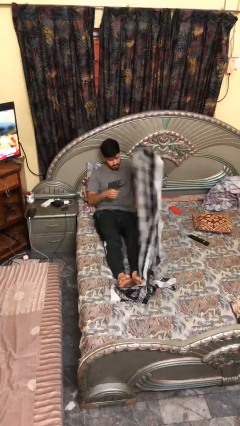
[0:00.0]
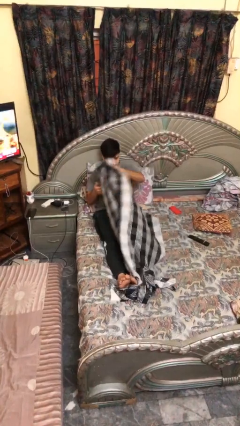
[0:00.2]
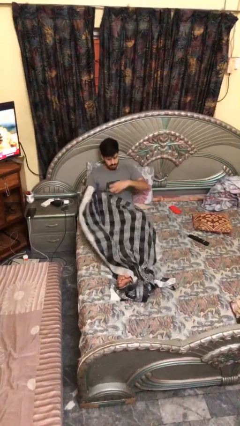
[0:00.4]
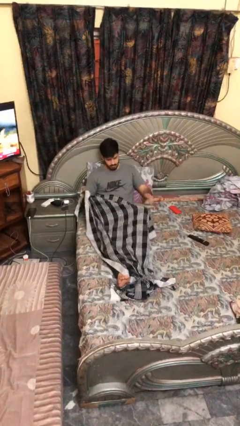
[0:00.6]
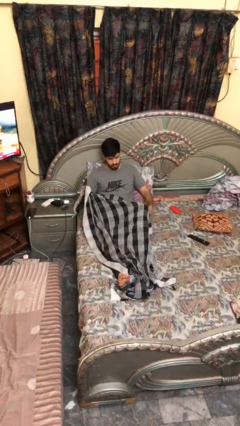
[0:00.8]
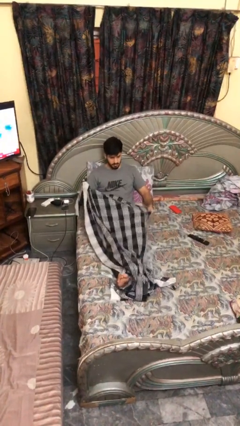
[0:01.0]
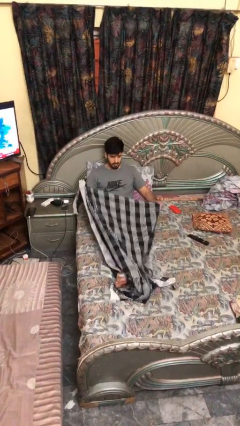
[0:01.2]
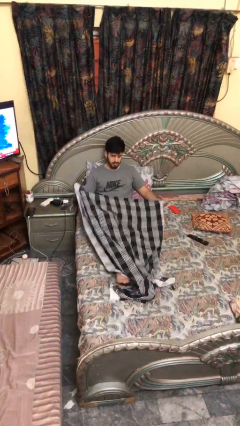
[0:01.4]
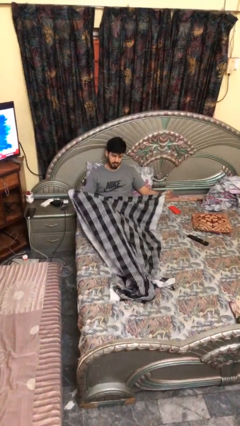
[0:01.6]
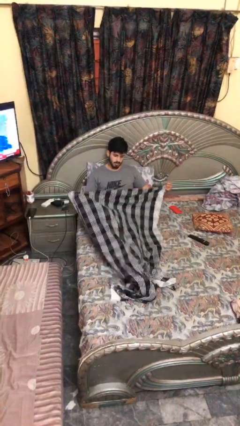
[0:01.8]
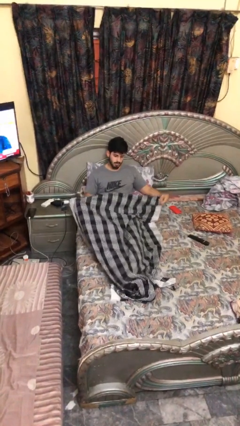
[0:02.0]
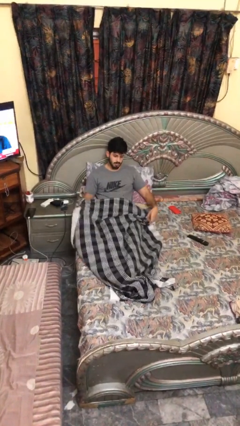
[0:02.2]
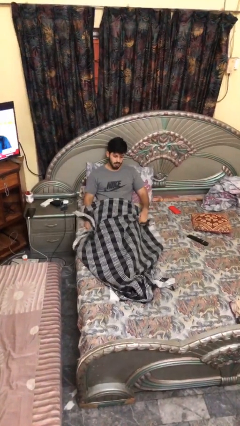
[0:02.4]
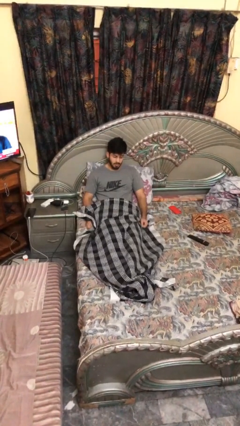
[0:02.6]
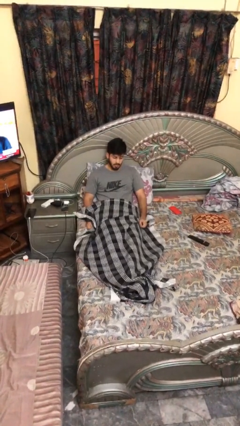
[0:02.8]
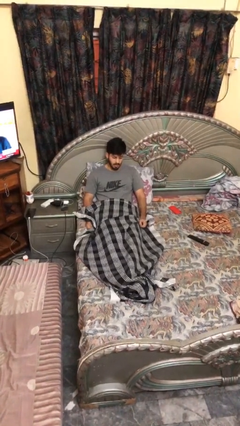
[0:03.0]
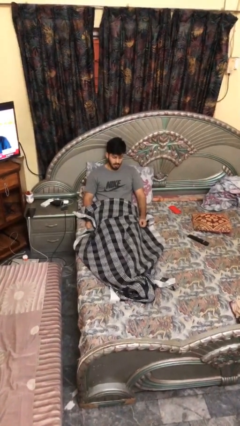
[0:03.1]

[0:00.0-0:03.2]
person covers with bedsheets

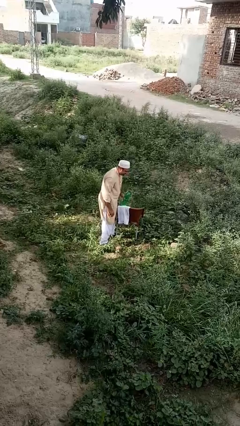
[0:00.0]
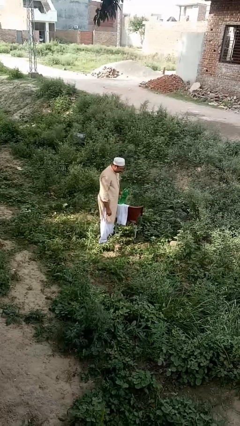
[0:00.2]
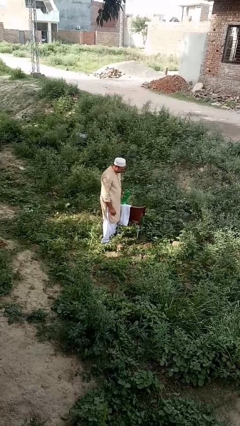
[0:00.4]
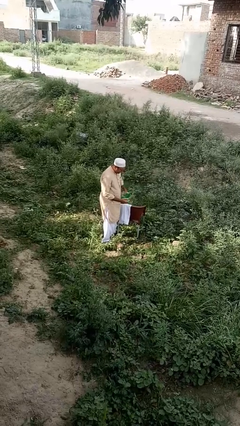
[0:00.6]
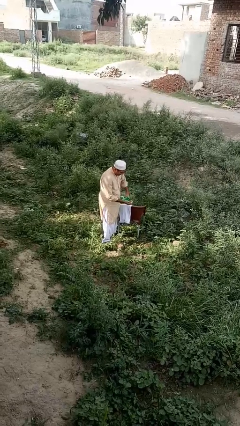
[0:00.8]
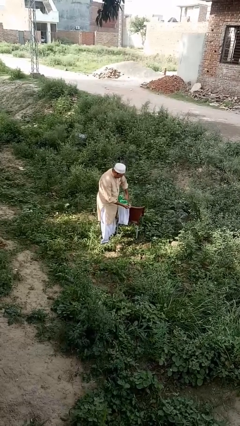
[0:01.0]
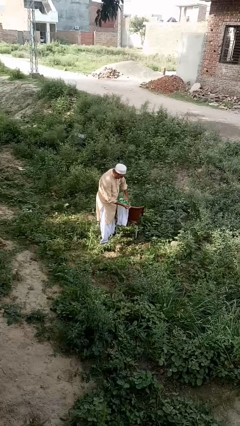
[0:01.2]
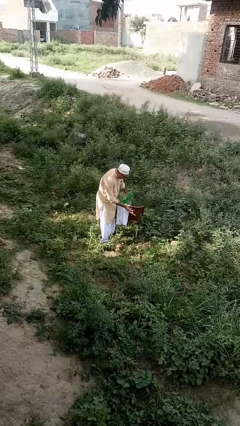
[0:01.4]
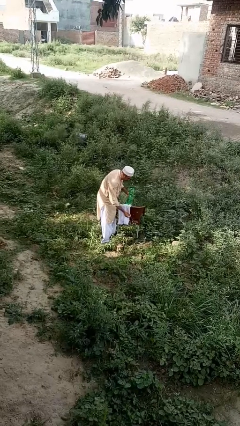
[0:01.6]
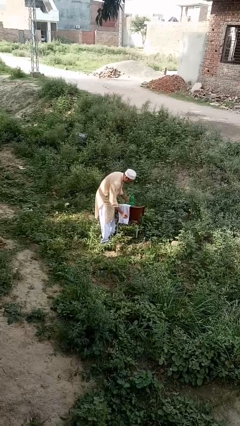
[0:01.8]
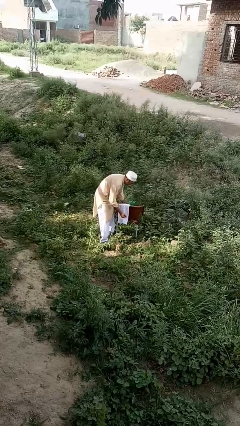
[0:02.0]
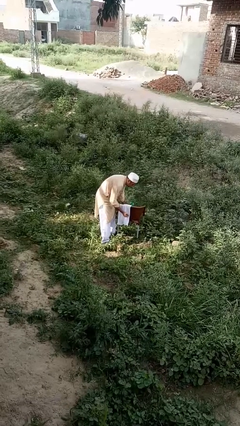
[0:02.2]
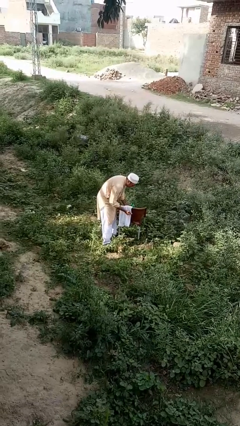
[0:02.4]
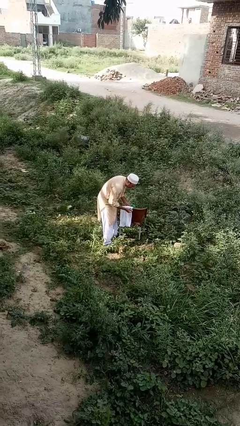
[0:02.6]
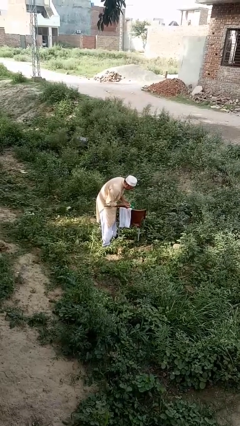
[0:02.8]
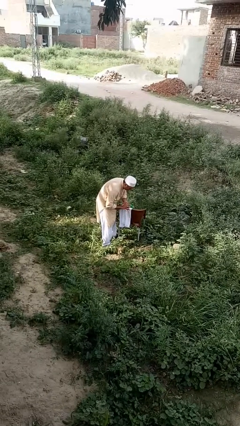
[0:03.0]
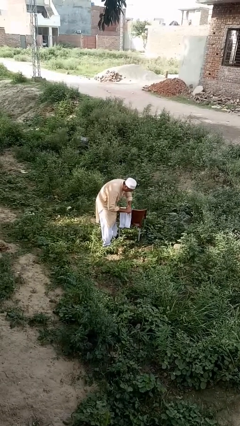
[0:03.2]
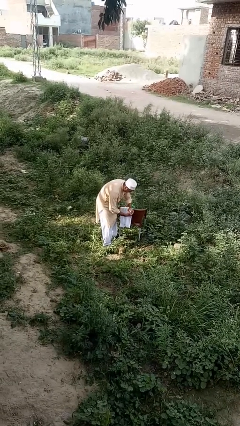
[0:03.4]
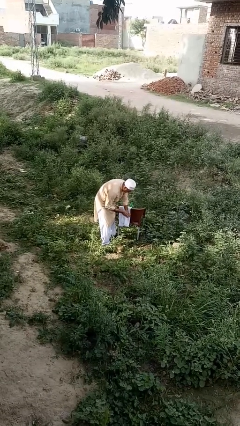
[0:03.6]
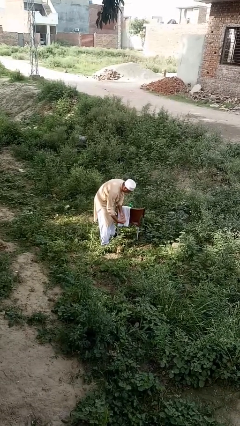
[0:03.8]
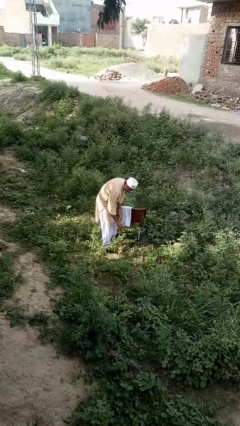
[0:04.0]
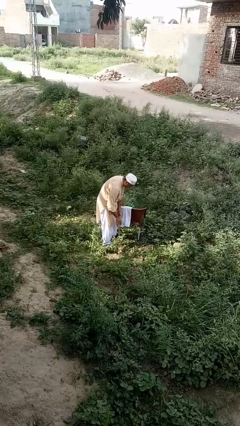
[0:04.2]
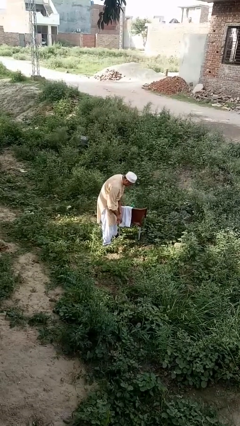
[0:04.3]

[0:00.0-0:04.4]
person washes hands

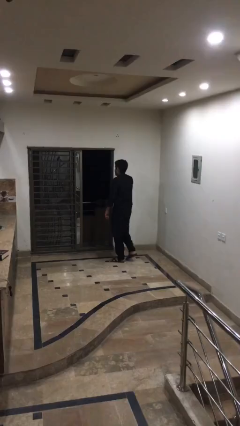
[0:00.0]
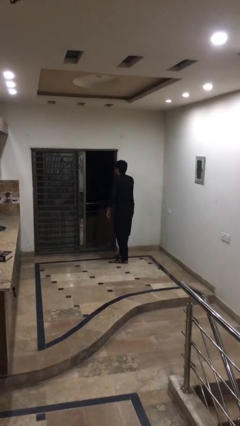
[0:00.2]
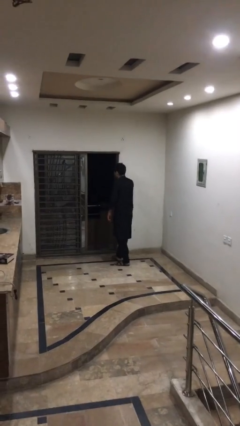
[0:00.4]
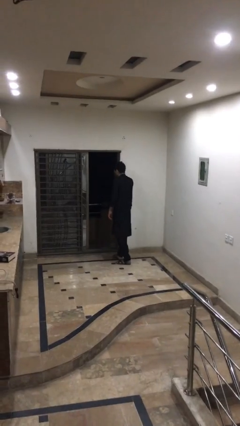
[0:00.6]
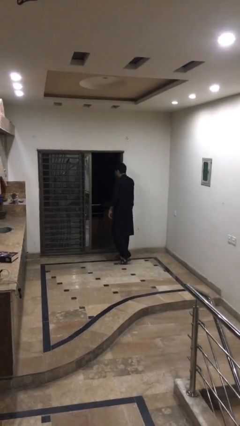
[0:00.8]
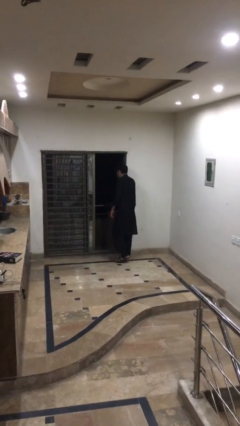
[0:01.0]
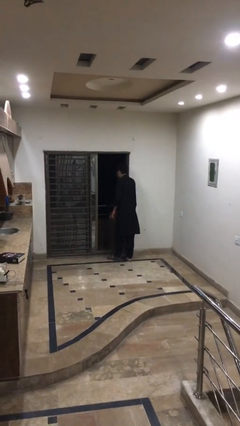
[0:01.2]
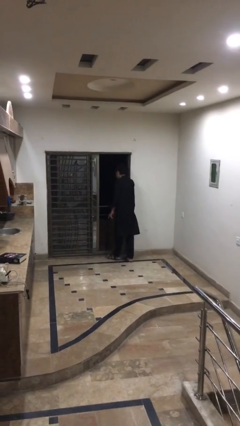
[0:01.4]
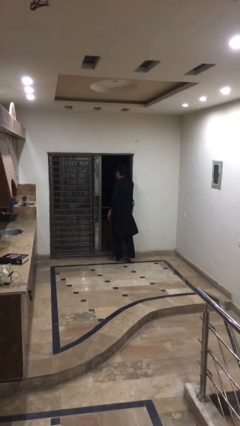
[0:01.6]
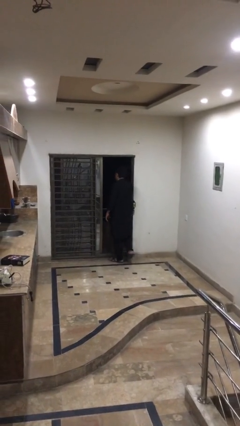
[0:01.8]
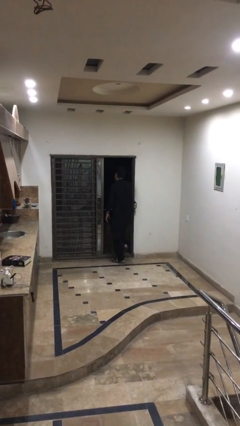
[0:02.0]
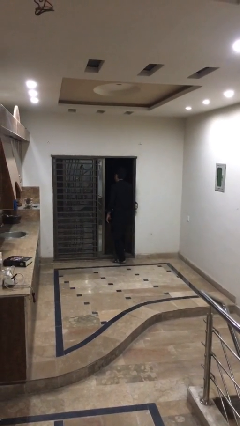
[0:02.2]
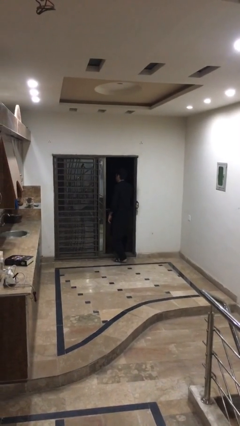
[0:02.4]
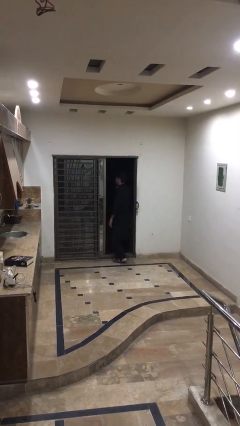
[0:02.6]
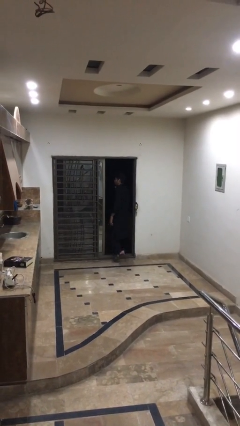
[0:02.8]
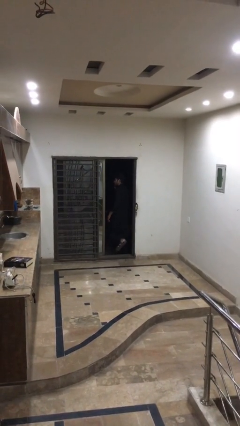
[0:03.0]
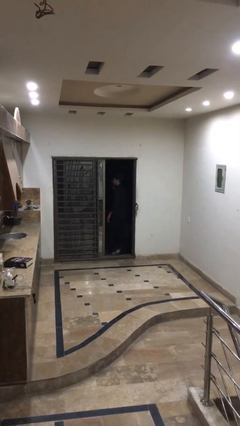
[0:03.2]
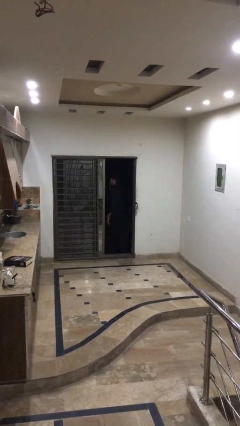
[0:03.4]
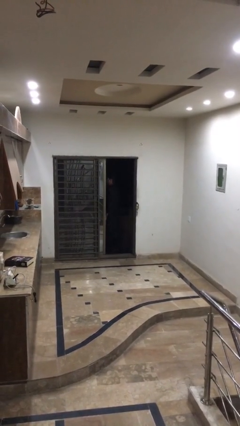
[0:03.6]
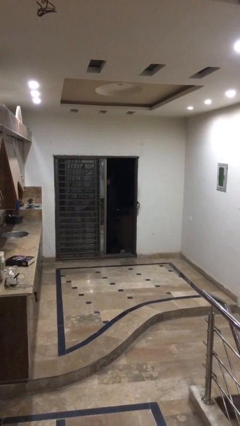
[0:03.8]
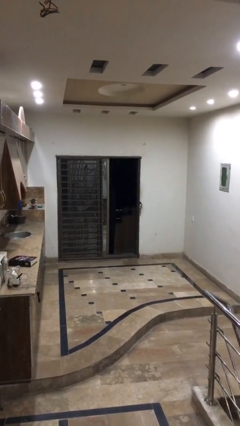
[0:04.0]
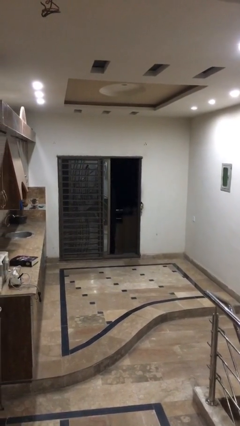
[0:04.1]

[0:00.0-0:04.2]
person exits scene through structure

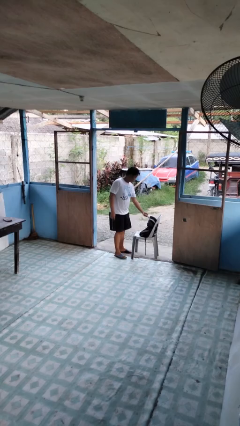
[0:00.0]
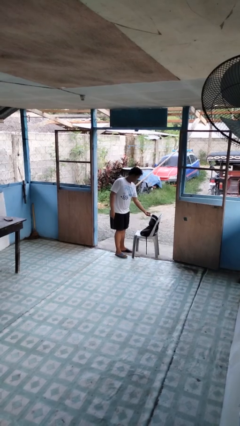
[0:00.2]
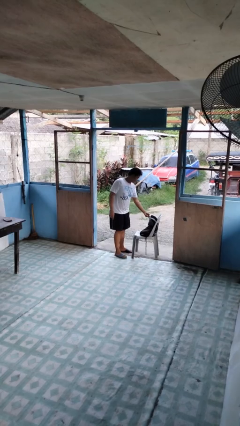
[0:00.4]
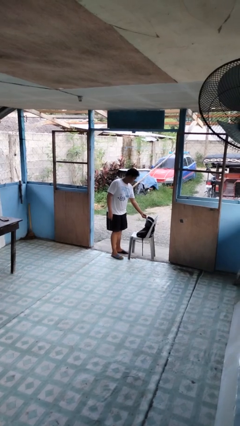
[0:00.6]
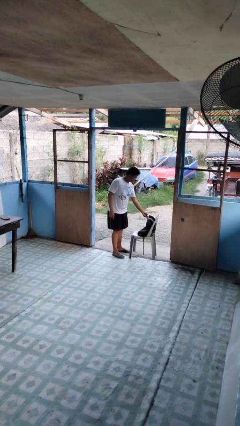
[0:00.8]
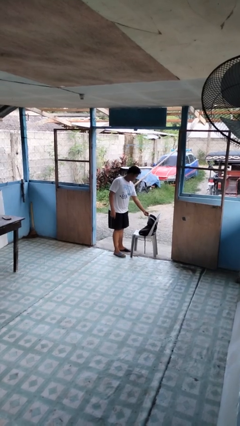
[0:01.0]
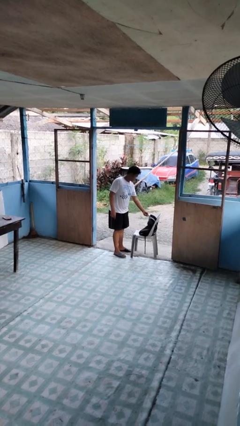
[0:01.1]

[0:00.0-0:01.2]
person taps object with finger

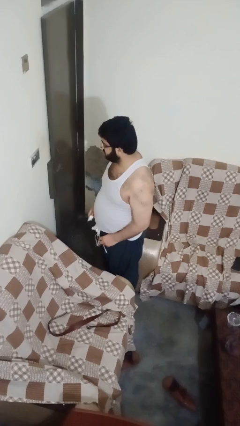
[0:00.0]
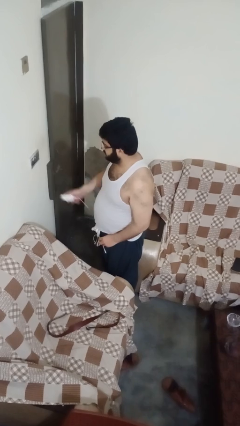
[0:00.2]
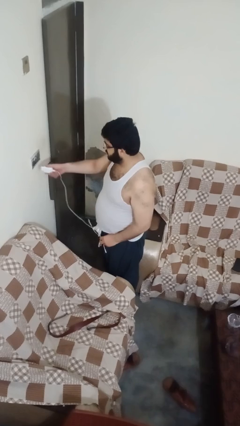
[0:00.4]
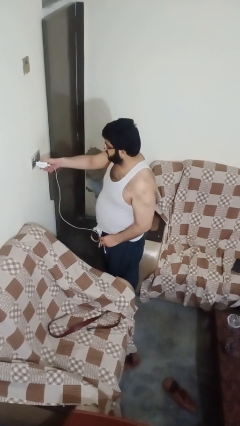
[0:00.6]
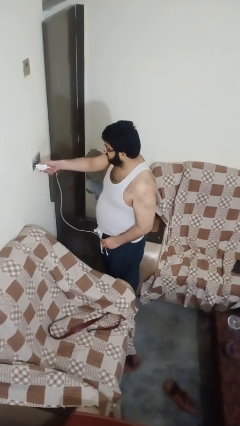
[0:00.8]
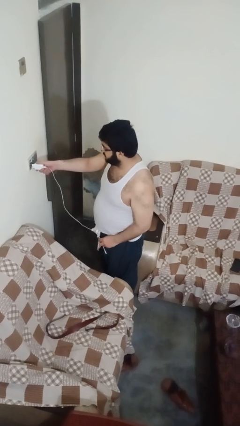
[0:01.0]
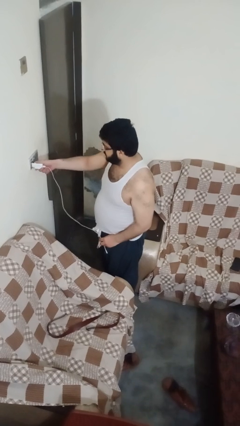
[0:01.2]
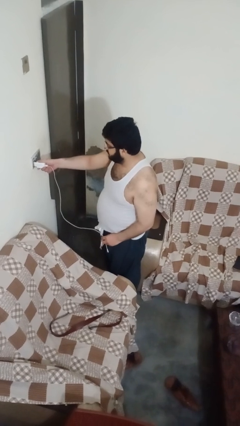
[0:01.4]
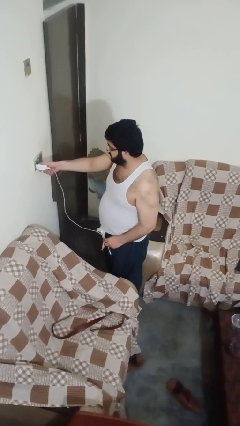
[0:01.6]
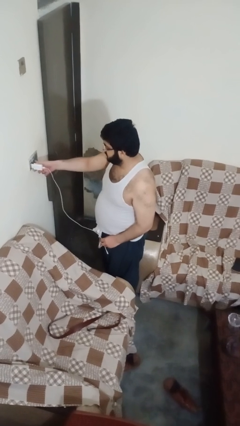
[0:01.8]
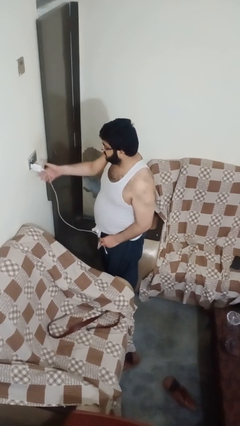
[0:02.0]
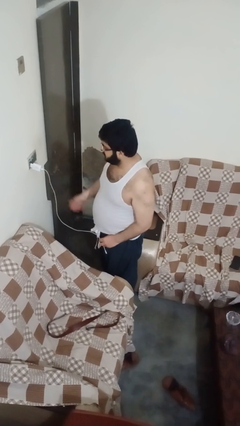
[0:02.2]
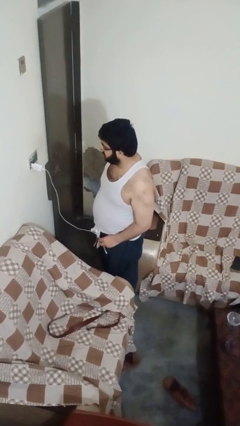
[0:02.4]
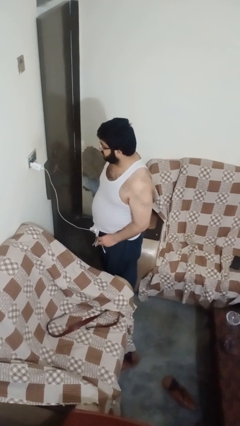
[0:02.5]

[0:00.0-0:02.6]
person plugs into electrical socket

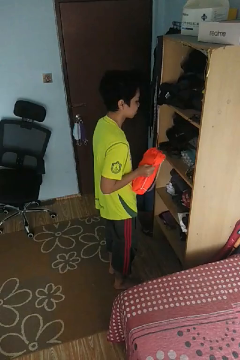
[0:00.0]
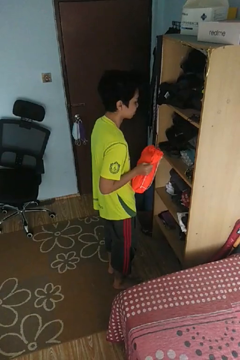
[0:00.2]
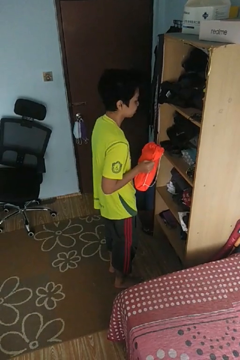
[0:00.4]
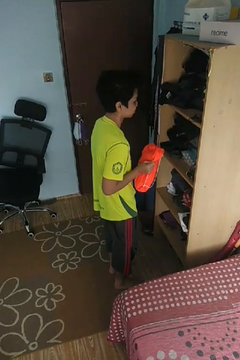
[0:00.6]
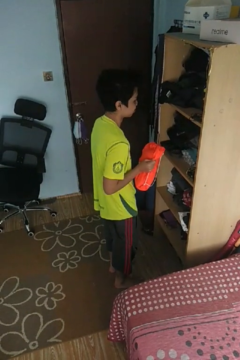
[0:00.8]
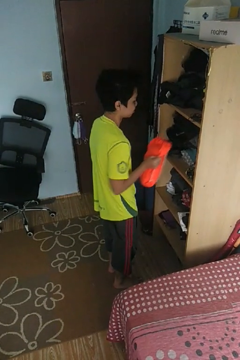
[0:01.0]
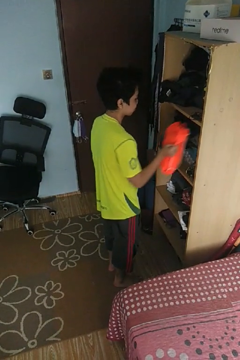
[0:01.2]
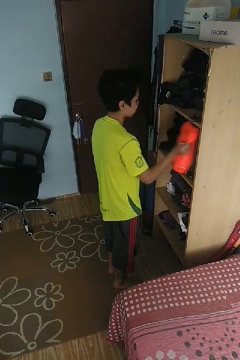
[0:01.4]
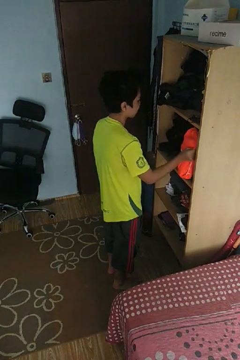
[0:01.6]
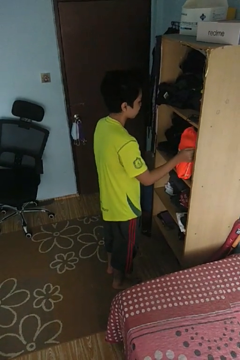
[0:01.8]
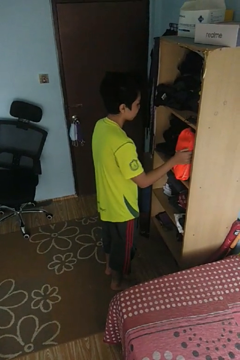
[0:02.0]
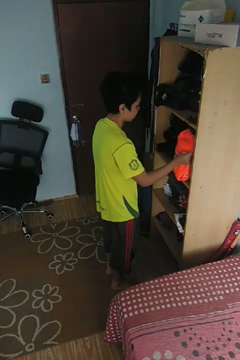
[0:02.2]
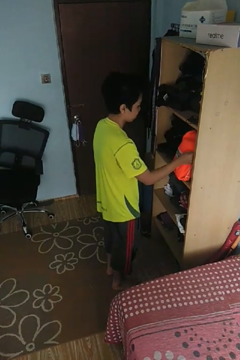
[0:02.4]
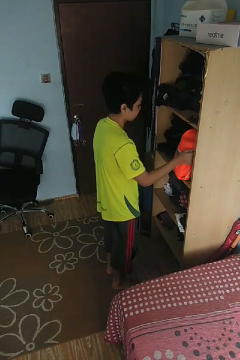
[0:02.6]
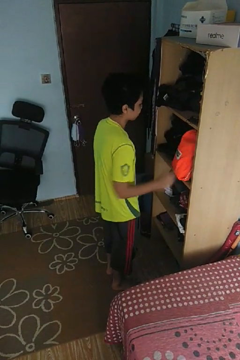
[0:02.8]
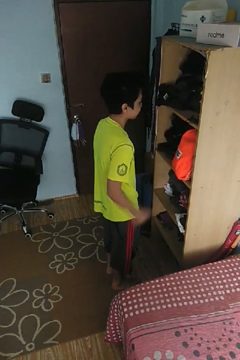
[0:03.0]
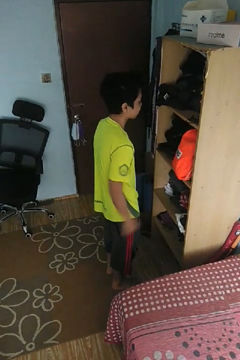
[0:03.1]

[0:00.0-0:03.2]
person puts down object into cabinet
